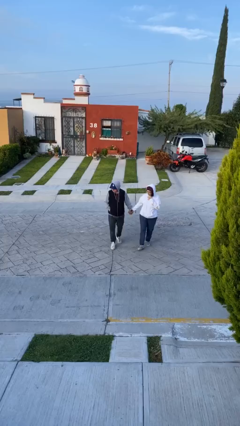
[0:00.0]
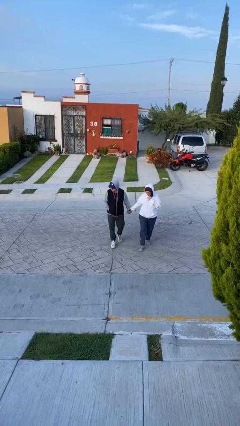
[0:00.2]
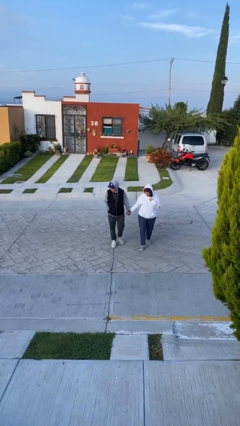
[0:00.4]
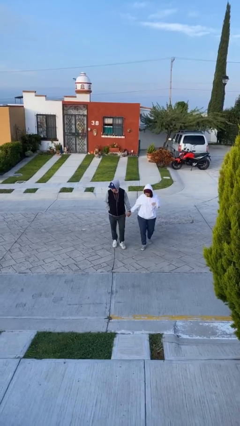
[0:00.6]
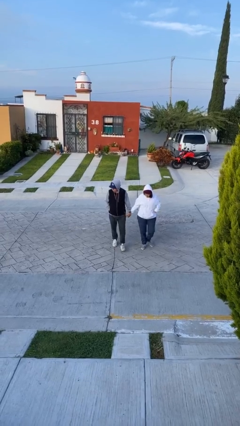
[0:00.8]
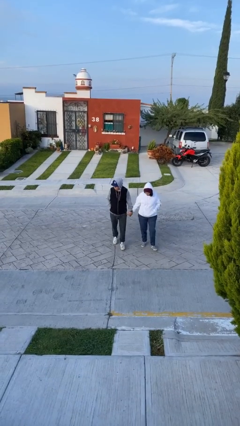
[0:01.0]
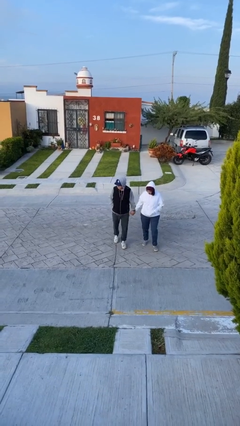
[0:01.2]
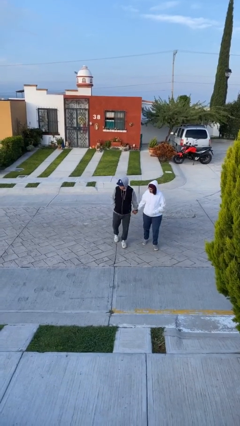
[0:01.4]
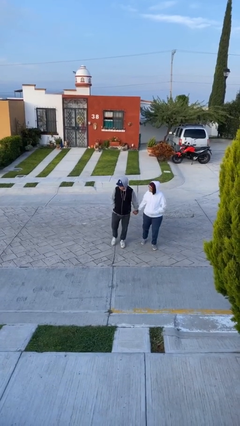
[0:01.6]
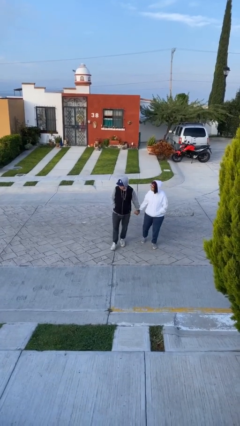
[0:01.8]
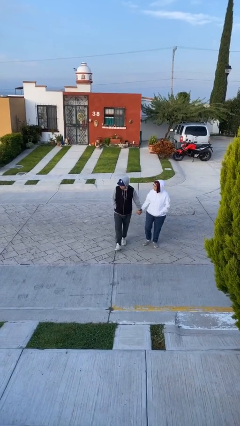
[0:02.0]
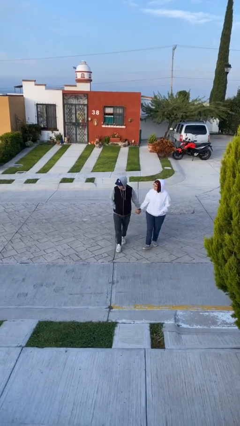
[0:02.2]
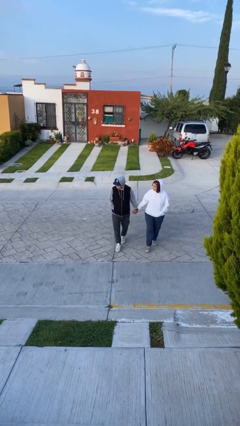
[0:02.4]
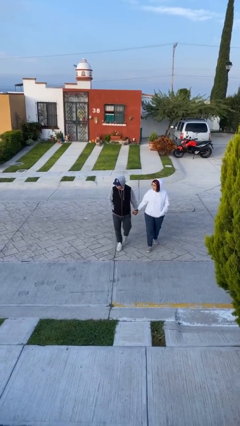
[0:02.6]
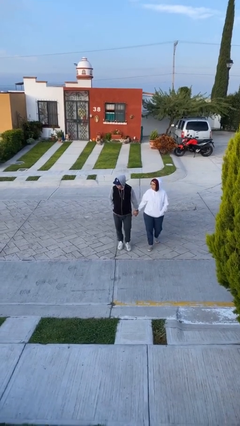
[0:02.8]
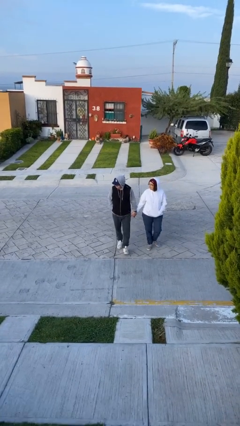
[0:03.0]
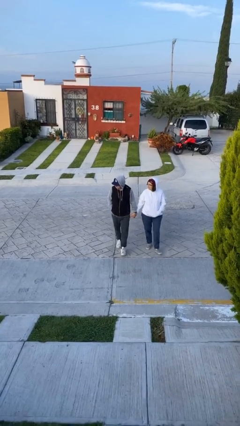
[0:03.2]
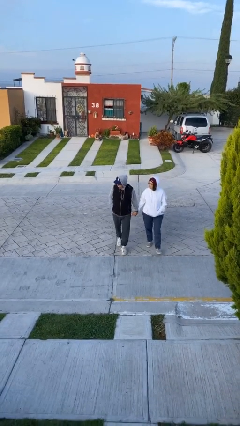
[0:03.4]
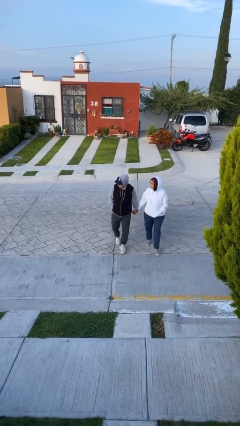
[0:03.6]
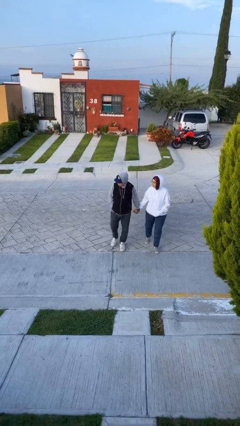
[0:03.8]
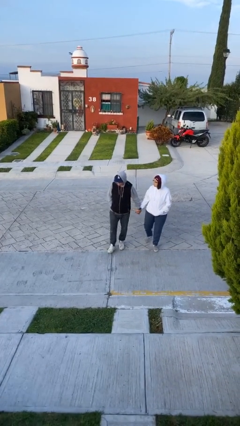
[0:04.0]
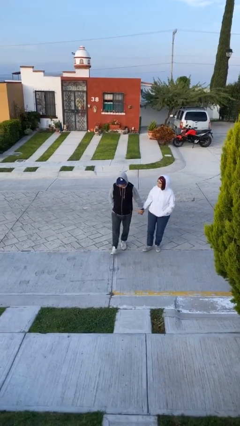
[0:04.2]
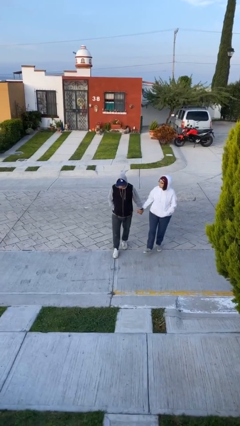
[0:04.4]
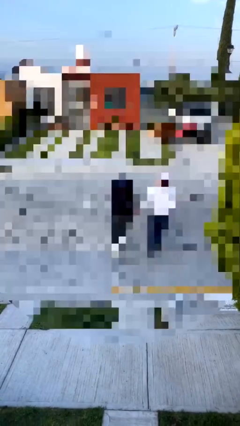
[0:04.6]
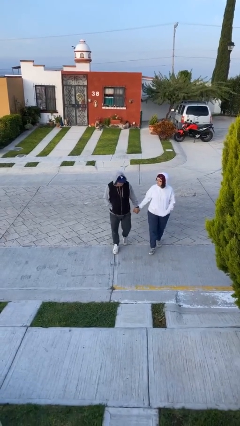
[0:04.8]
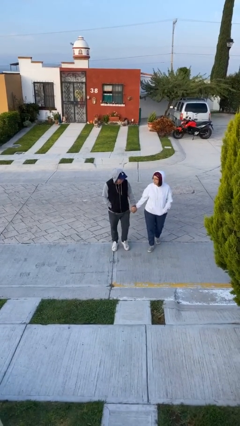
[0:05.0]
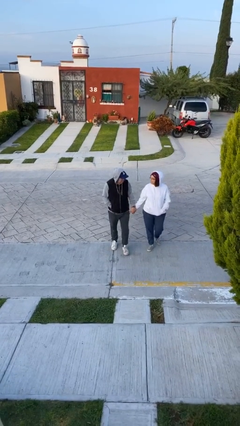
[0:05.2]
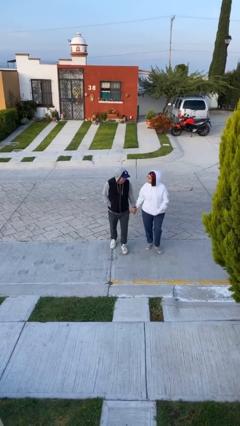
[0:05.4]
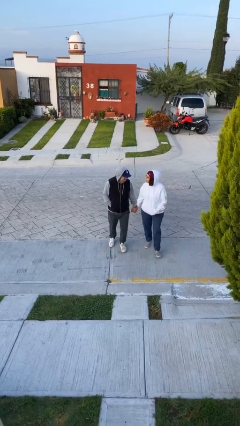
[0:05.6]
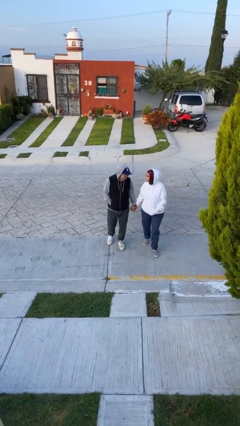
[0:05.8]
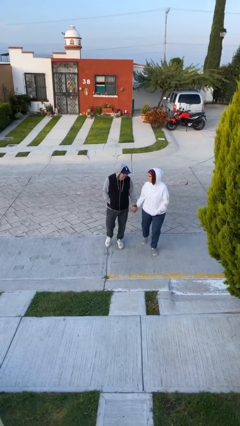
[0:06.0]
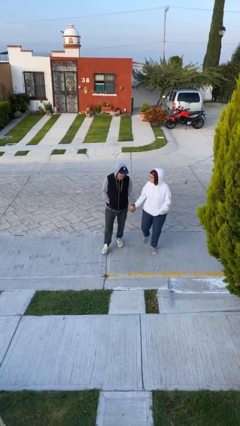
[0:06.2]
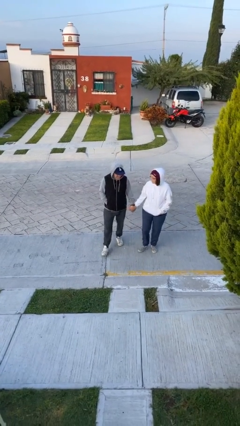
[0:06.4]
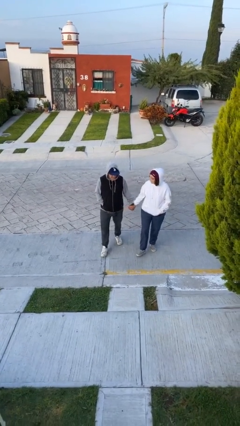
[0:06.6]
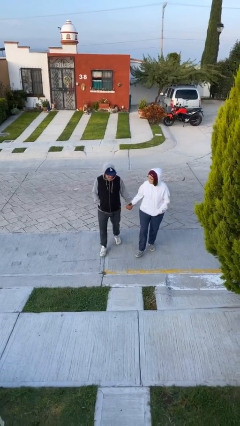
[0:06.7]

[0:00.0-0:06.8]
person holds hand

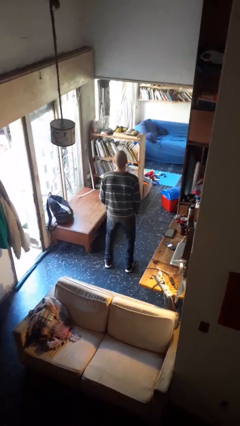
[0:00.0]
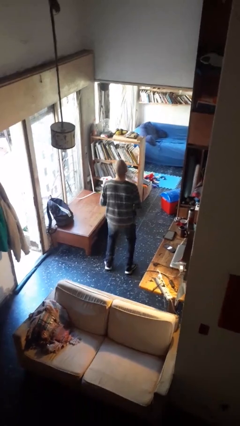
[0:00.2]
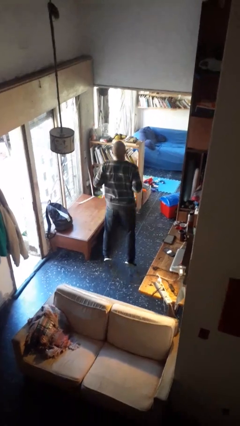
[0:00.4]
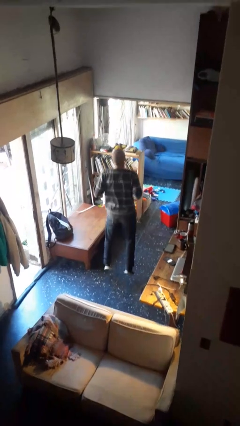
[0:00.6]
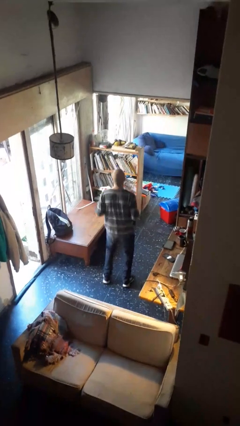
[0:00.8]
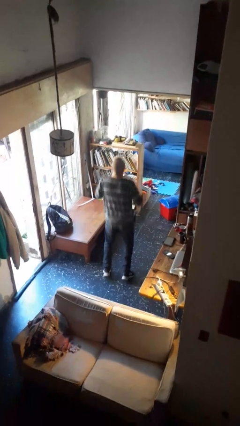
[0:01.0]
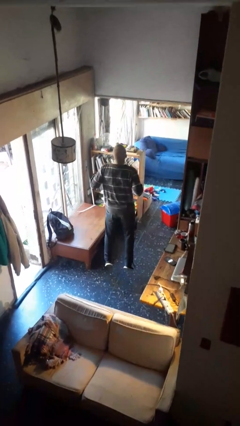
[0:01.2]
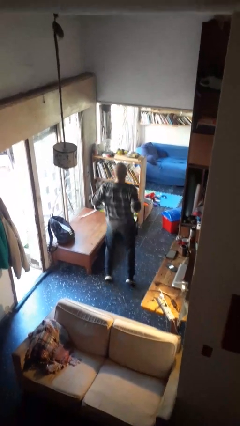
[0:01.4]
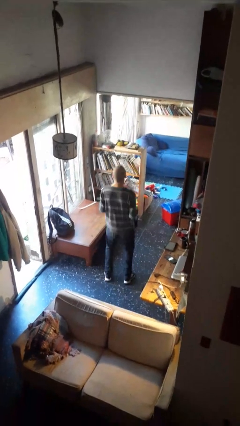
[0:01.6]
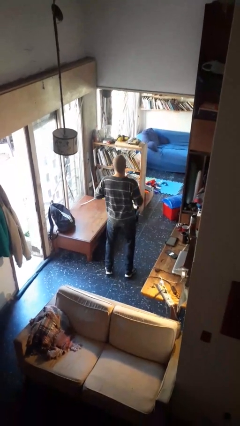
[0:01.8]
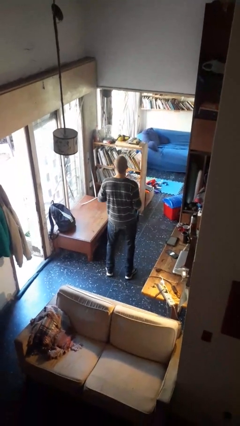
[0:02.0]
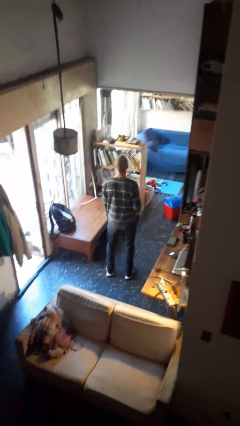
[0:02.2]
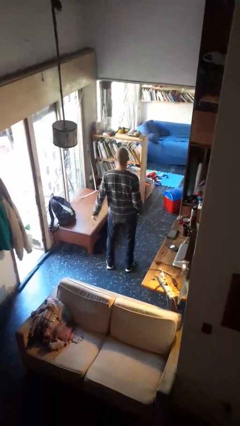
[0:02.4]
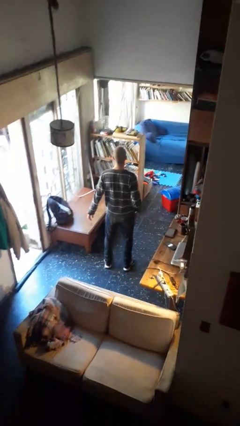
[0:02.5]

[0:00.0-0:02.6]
person jumps

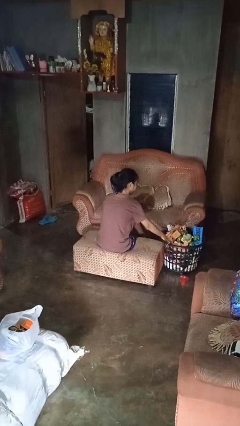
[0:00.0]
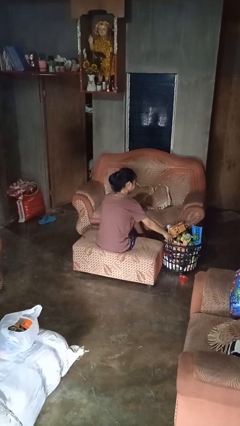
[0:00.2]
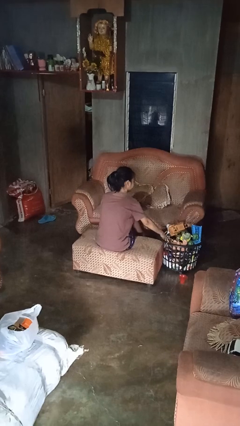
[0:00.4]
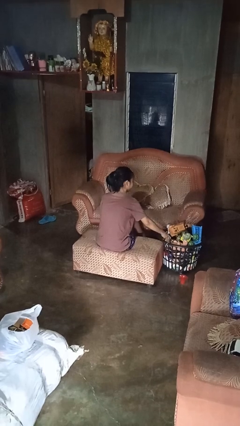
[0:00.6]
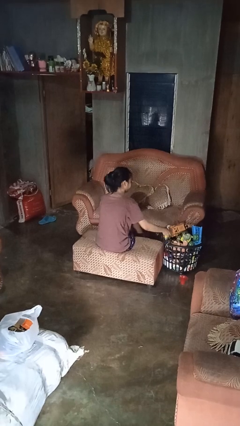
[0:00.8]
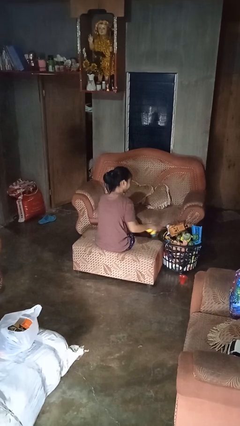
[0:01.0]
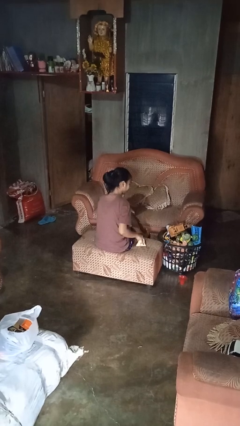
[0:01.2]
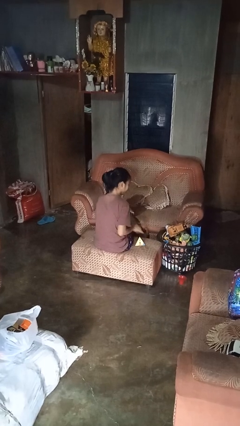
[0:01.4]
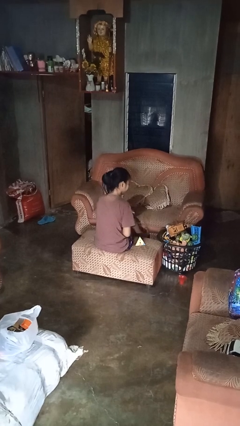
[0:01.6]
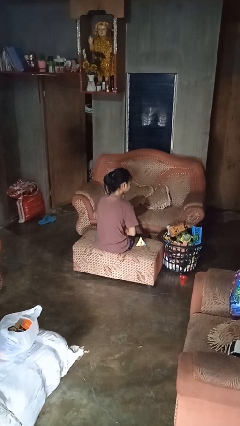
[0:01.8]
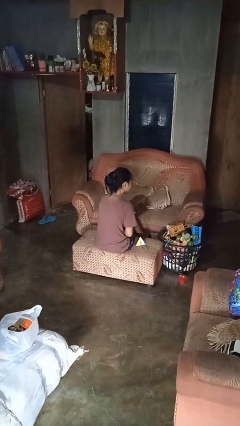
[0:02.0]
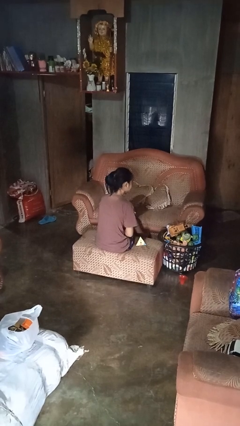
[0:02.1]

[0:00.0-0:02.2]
person takes object from basket

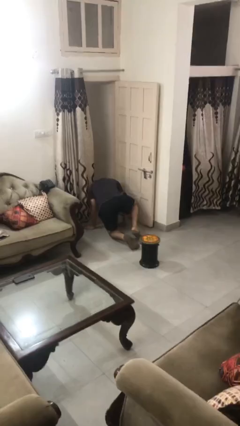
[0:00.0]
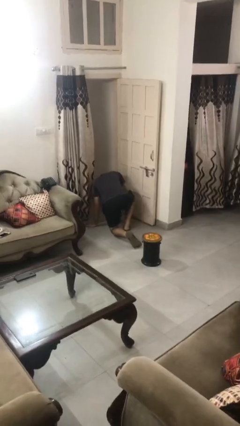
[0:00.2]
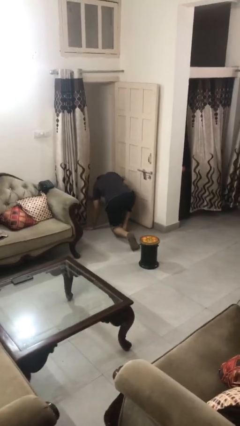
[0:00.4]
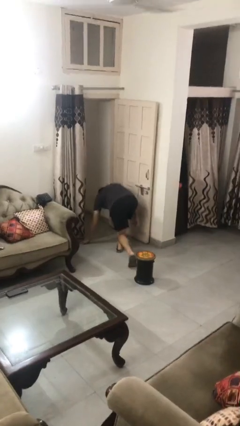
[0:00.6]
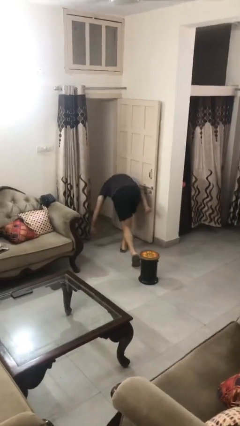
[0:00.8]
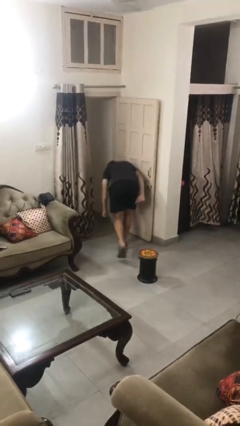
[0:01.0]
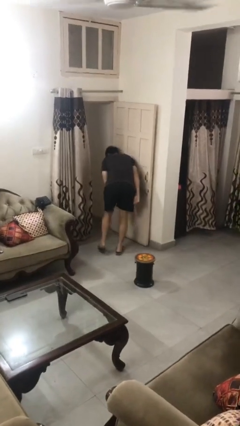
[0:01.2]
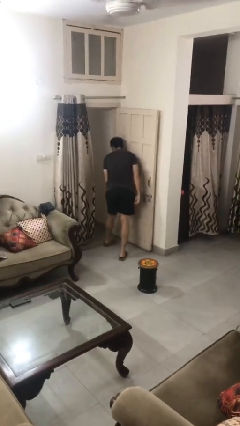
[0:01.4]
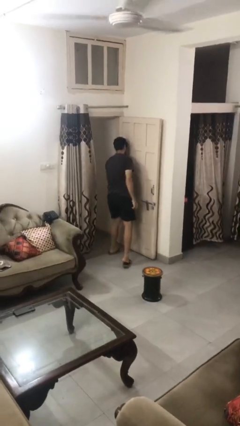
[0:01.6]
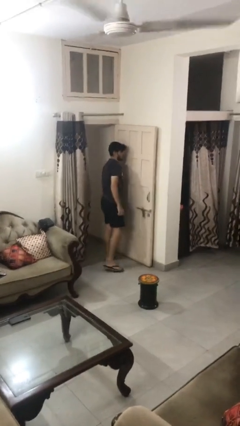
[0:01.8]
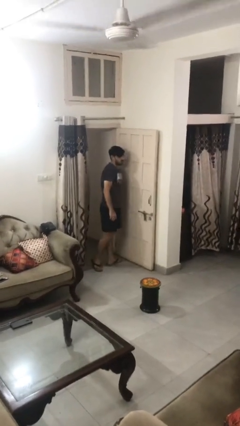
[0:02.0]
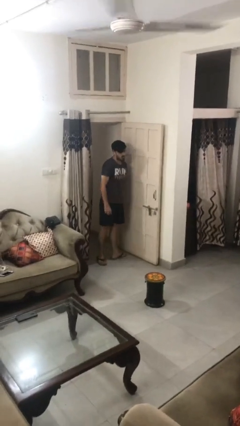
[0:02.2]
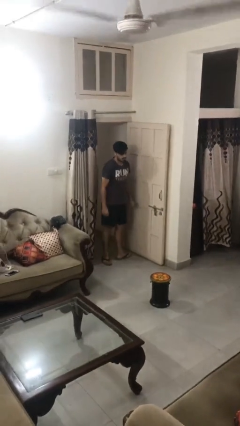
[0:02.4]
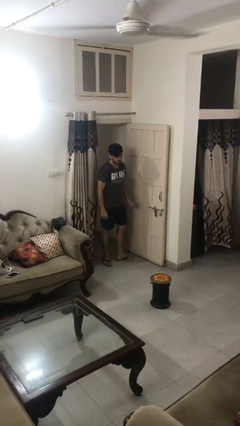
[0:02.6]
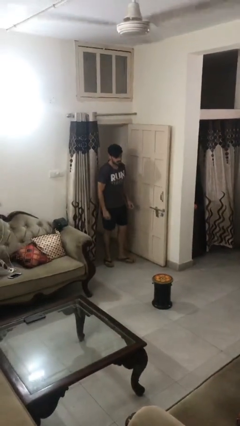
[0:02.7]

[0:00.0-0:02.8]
person stands up from floor

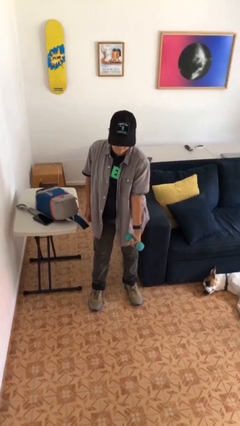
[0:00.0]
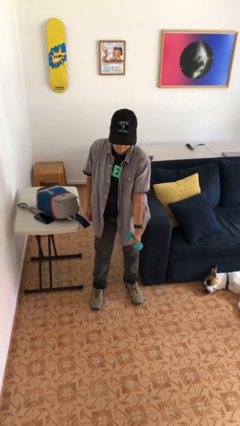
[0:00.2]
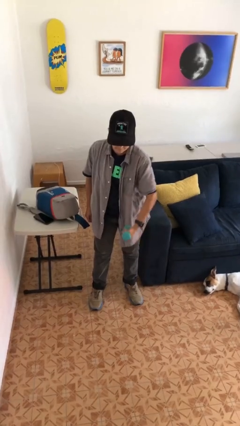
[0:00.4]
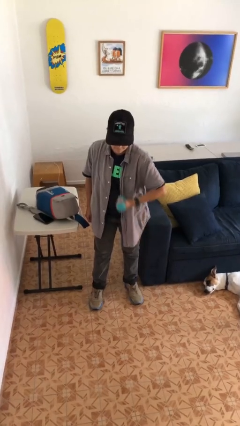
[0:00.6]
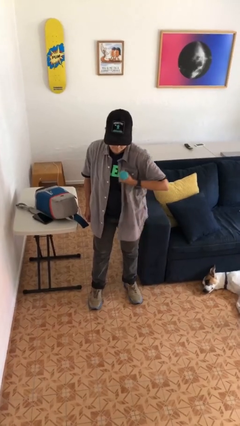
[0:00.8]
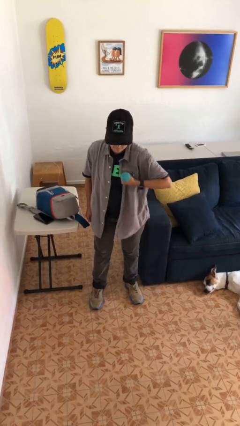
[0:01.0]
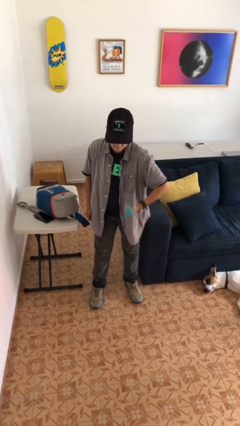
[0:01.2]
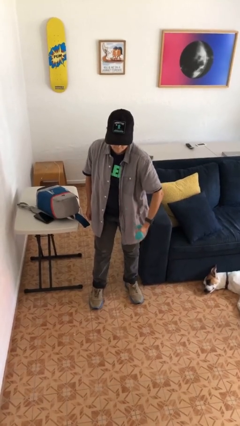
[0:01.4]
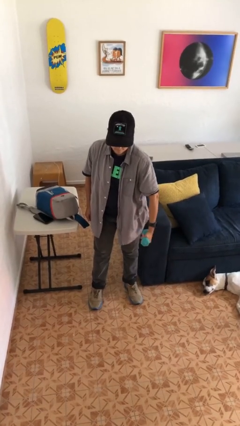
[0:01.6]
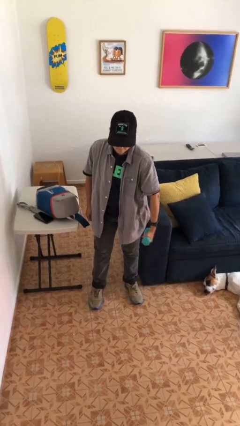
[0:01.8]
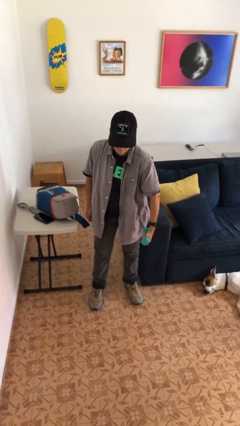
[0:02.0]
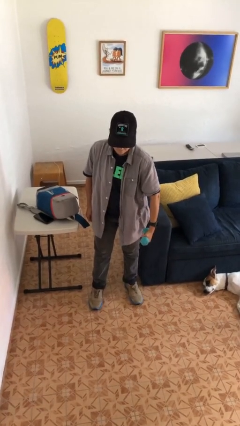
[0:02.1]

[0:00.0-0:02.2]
person lifts dumbbells

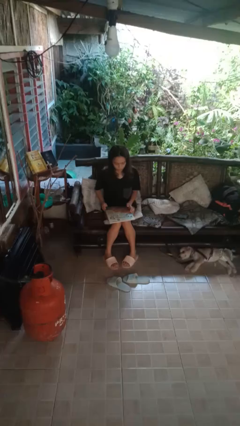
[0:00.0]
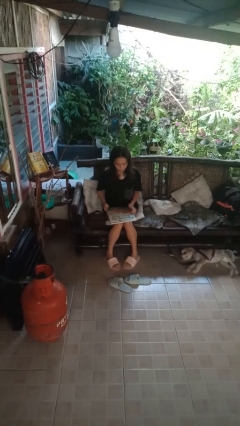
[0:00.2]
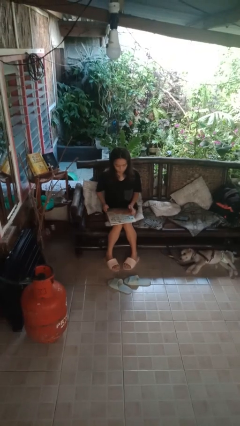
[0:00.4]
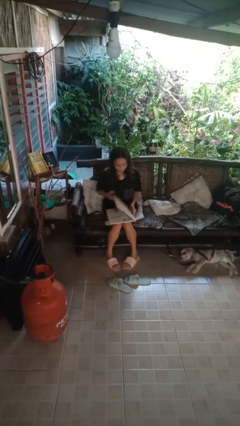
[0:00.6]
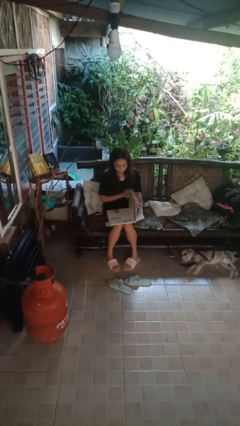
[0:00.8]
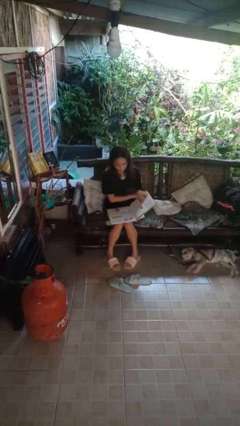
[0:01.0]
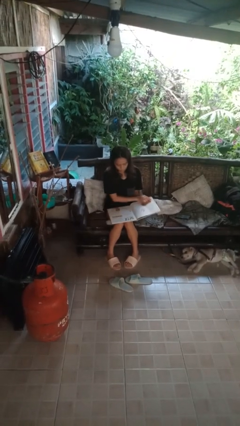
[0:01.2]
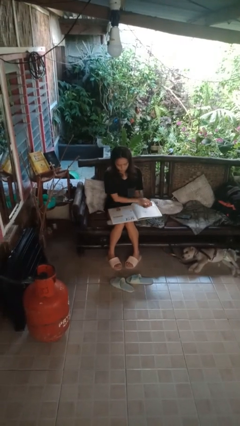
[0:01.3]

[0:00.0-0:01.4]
person reads book
